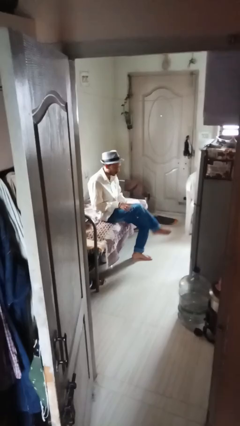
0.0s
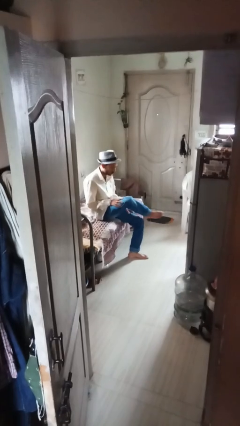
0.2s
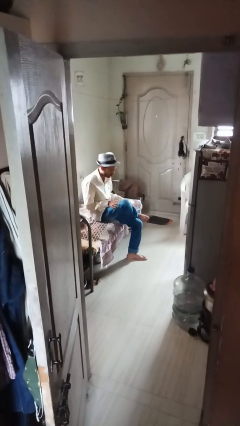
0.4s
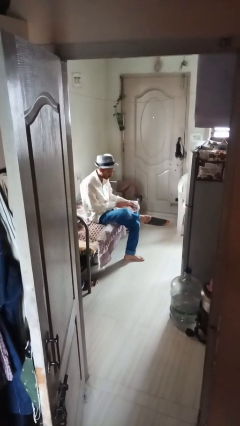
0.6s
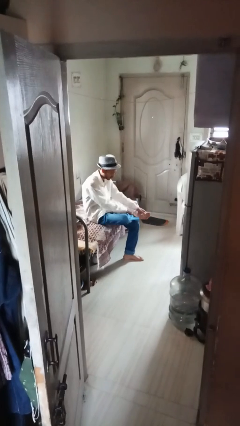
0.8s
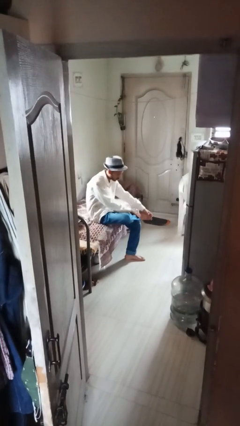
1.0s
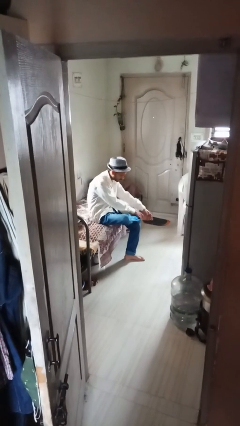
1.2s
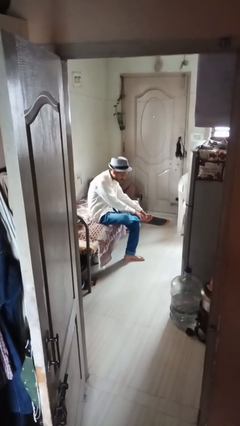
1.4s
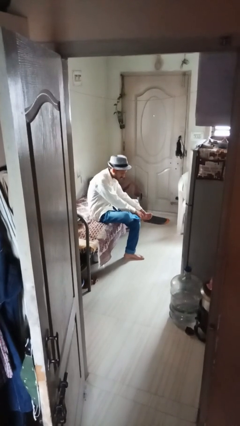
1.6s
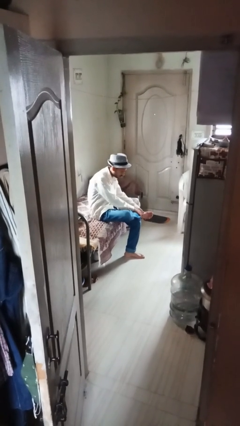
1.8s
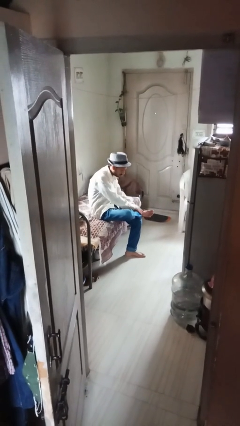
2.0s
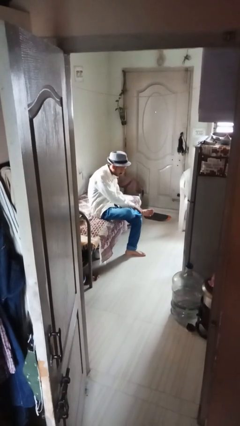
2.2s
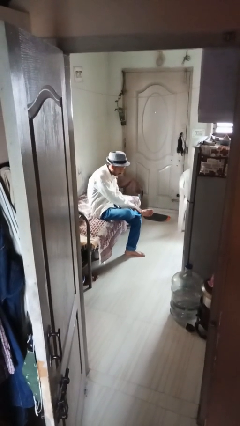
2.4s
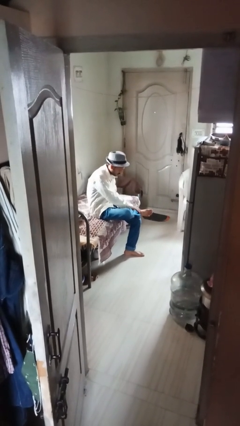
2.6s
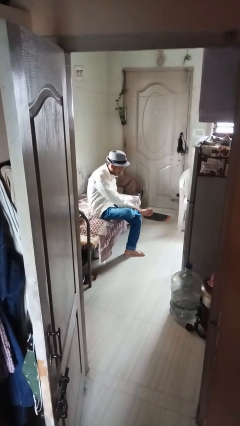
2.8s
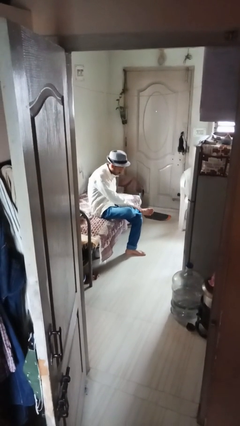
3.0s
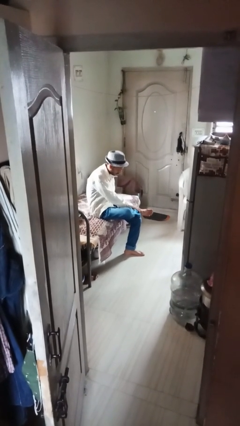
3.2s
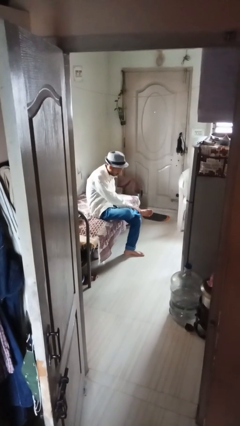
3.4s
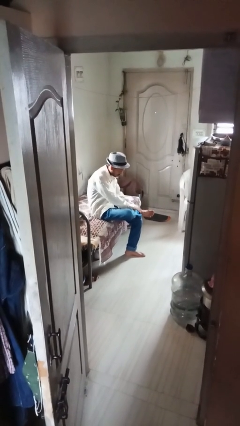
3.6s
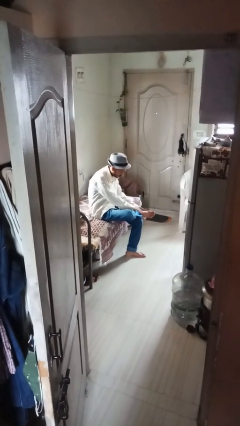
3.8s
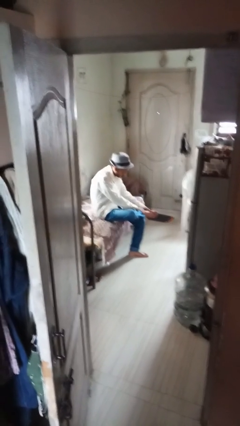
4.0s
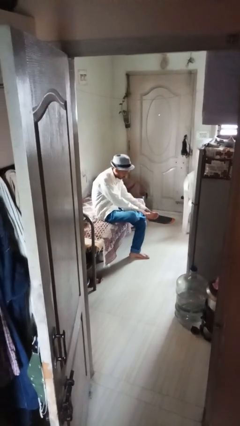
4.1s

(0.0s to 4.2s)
person rubs foot

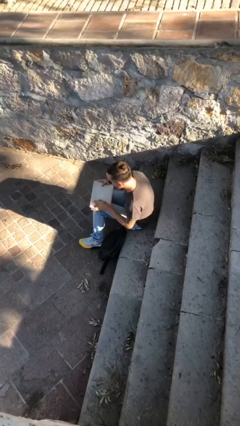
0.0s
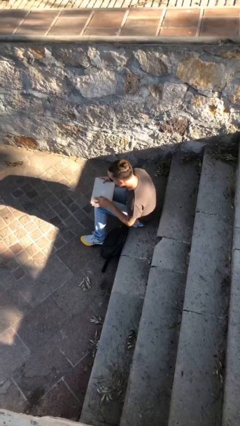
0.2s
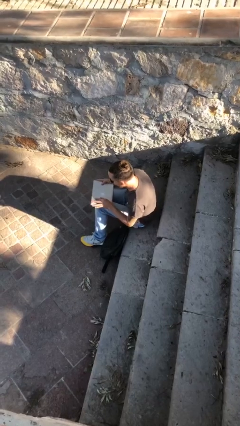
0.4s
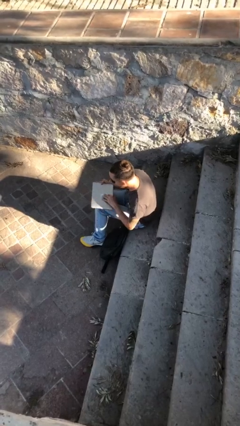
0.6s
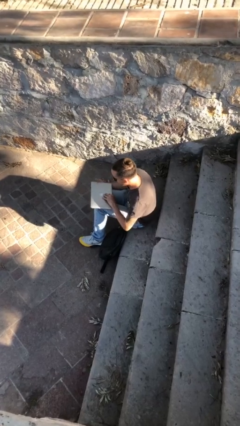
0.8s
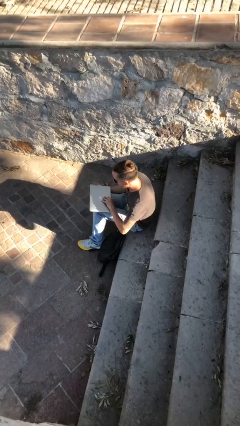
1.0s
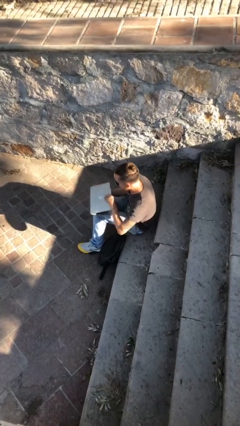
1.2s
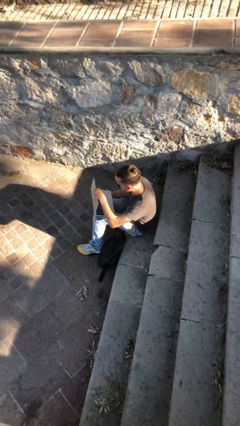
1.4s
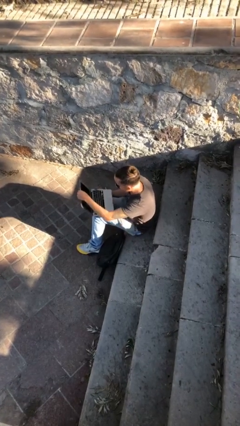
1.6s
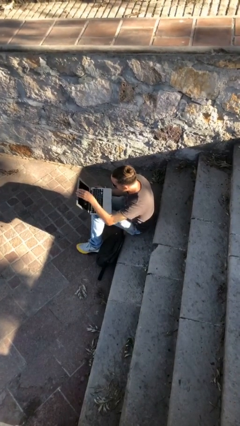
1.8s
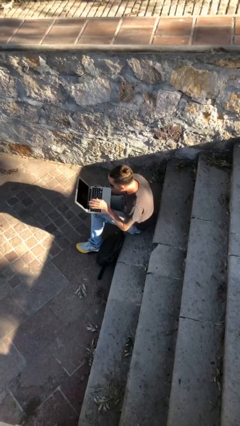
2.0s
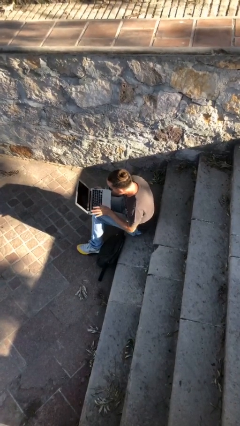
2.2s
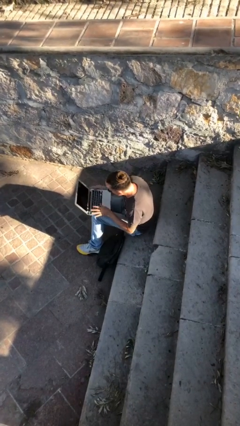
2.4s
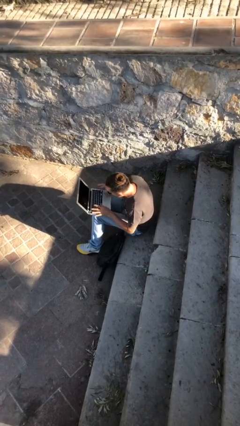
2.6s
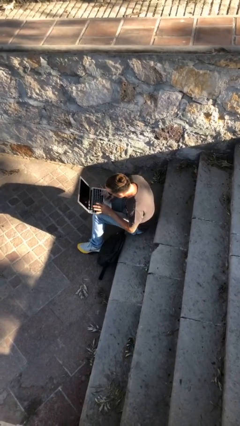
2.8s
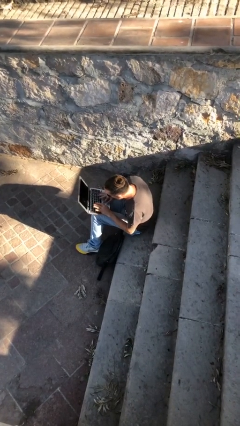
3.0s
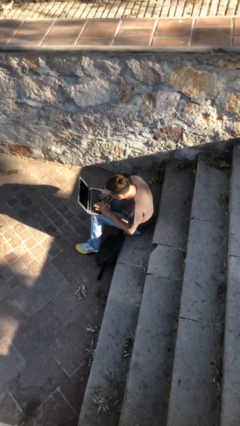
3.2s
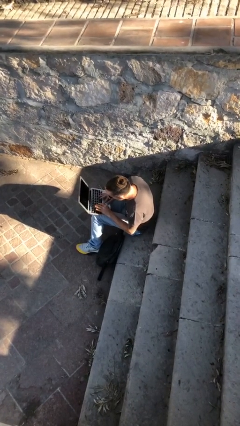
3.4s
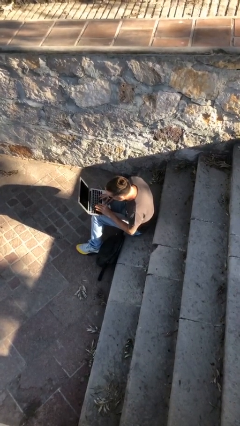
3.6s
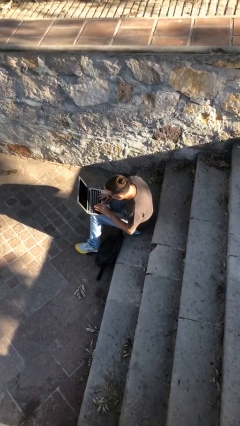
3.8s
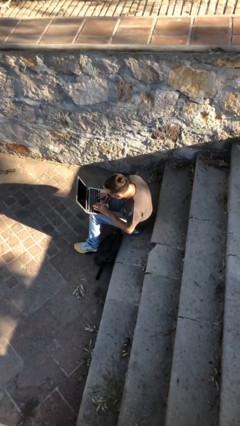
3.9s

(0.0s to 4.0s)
person interacts with laptop

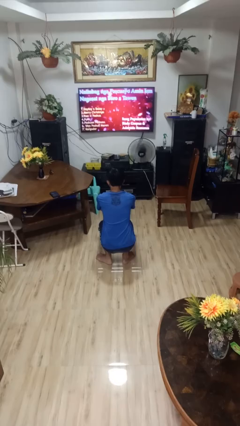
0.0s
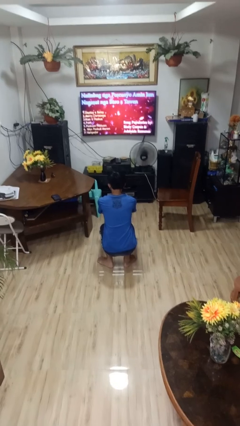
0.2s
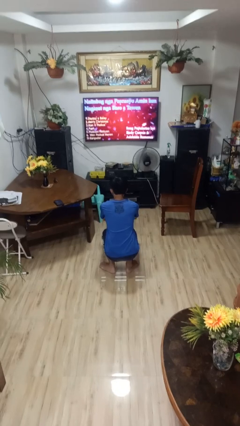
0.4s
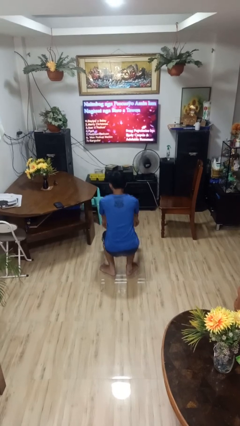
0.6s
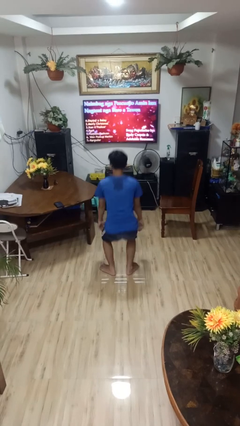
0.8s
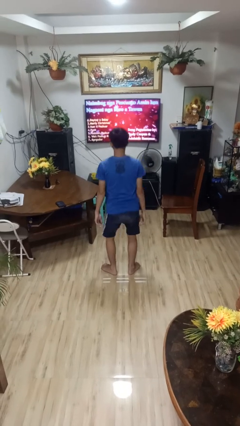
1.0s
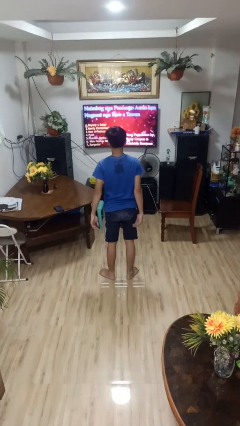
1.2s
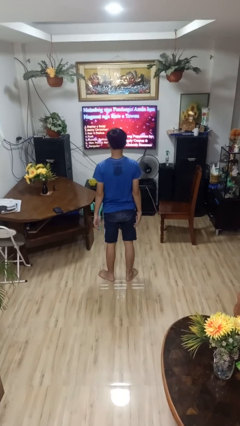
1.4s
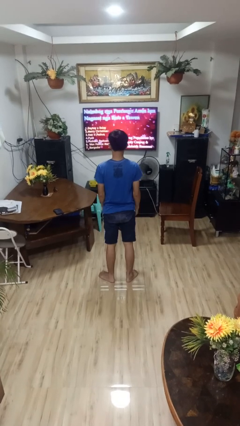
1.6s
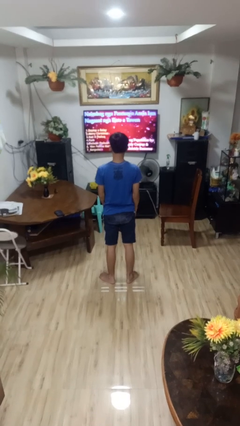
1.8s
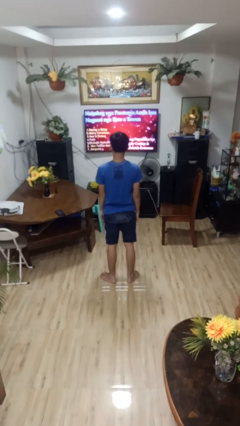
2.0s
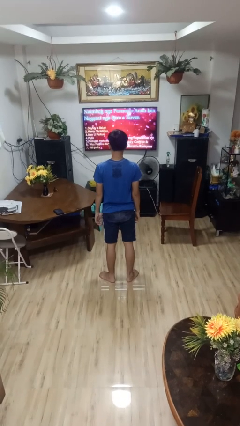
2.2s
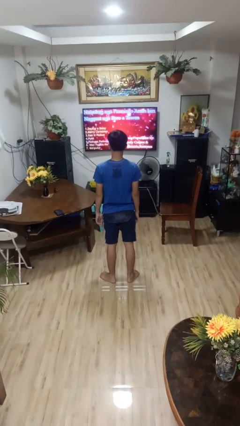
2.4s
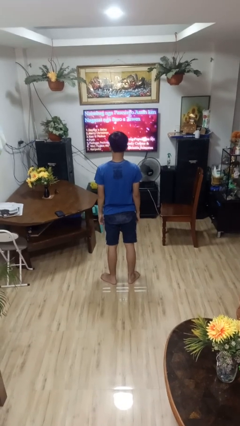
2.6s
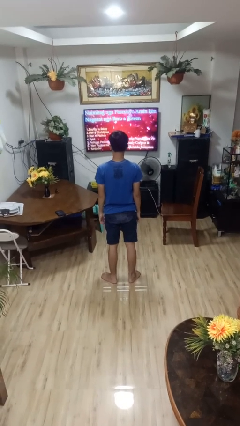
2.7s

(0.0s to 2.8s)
person stands up

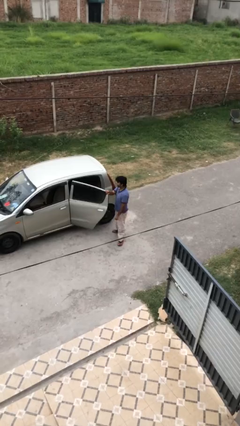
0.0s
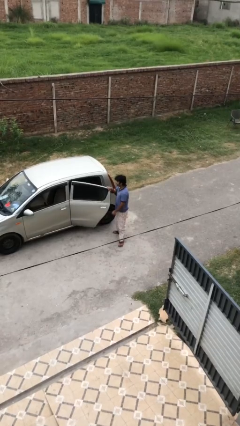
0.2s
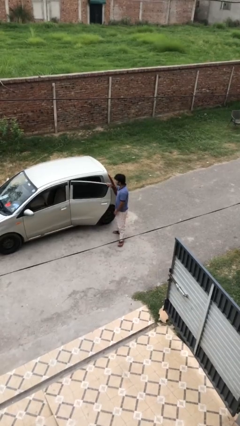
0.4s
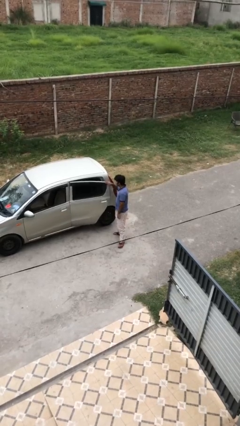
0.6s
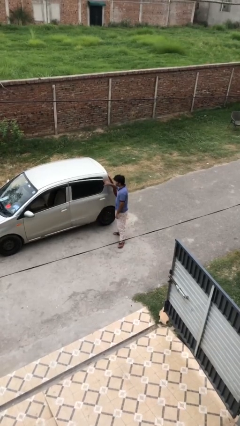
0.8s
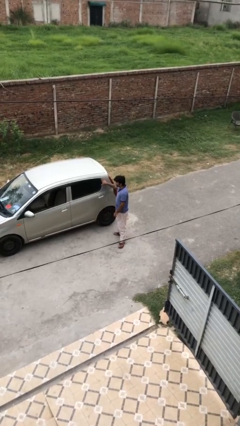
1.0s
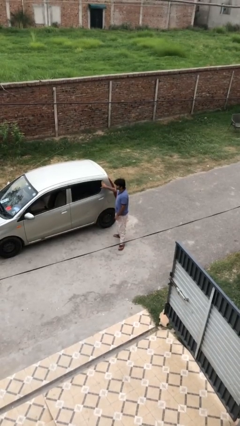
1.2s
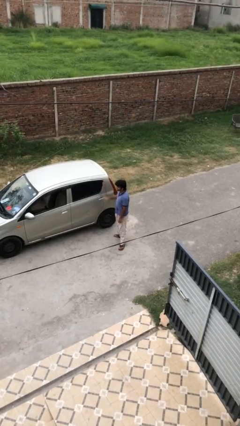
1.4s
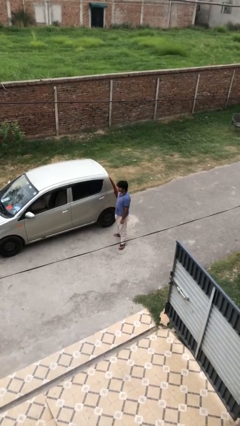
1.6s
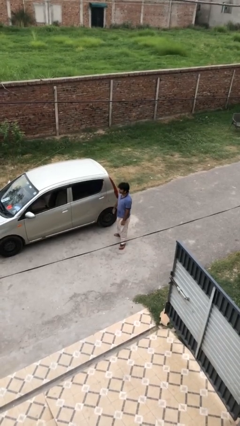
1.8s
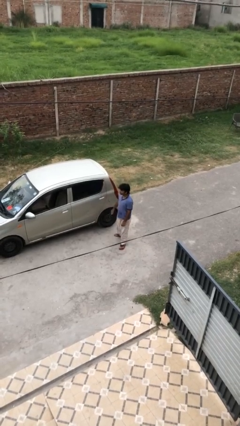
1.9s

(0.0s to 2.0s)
person closes car door

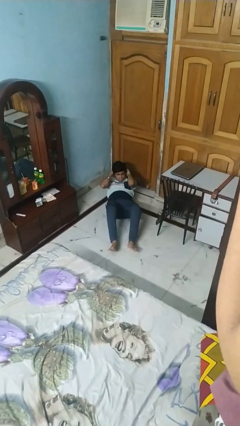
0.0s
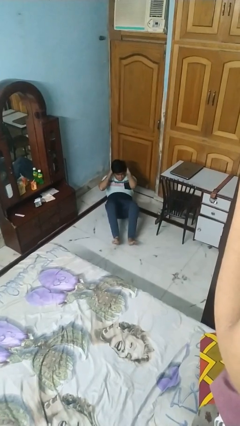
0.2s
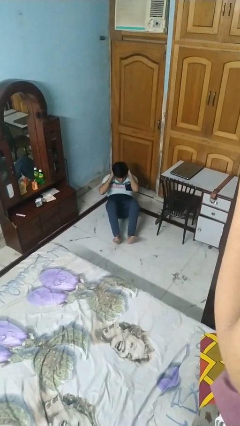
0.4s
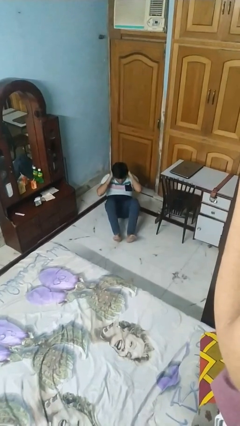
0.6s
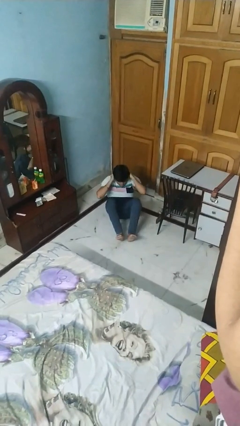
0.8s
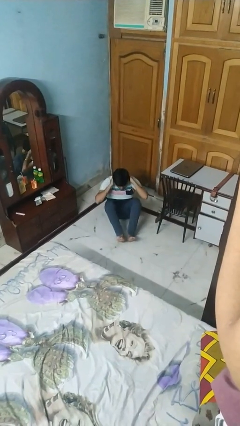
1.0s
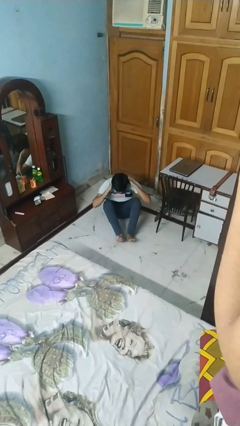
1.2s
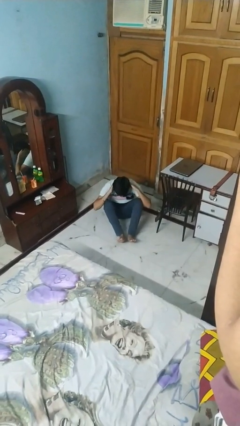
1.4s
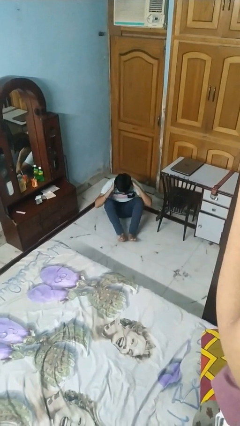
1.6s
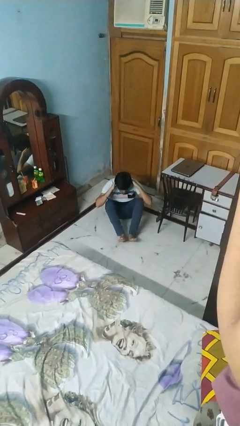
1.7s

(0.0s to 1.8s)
person exercises with situp

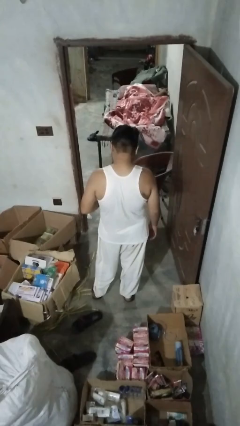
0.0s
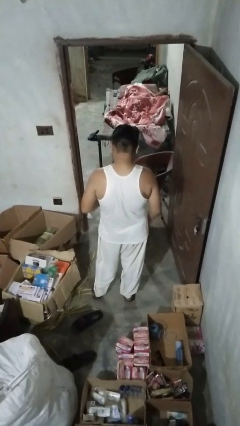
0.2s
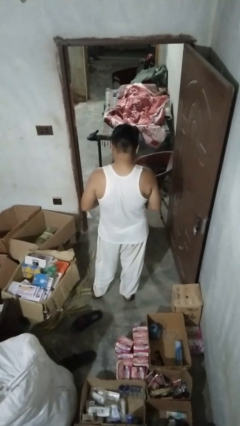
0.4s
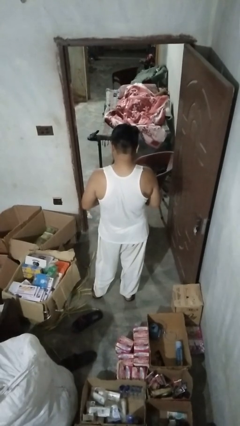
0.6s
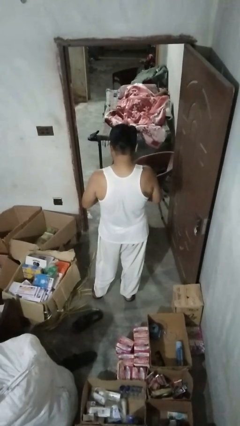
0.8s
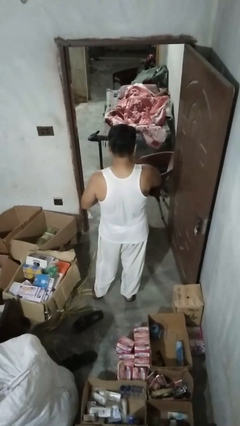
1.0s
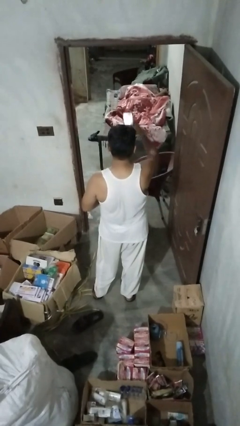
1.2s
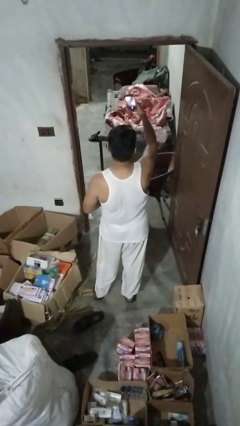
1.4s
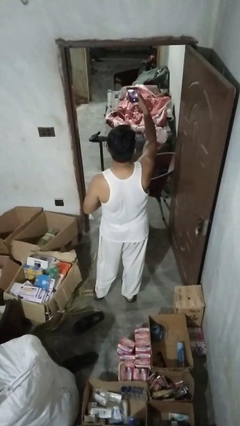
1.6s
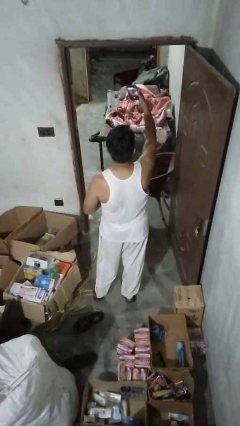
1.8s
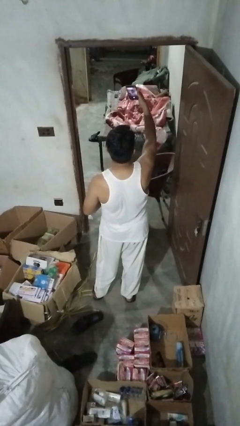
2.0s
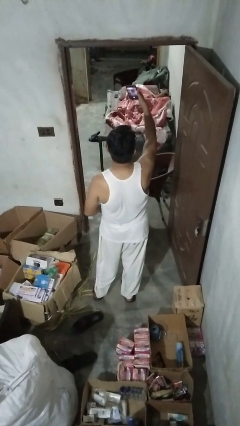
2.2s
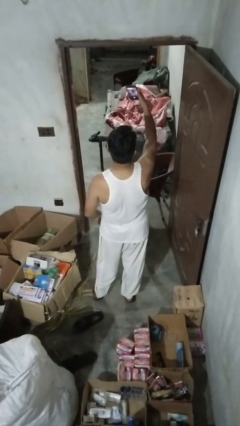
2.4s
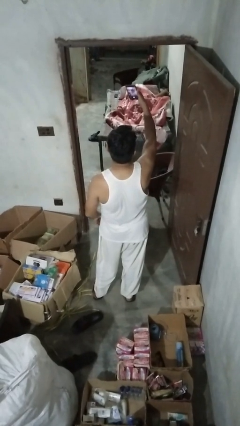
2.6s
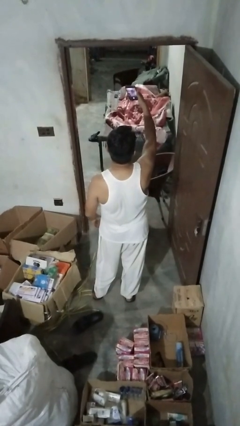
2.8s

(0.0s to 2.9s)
person takes selfie
